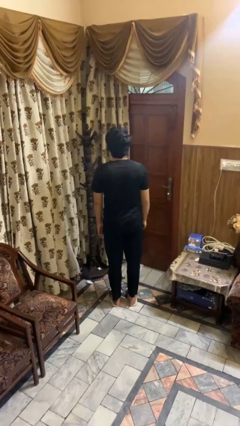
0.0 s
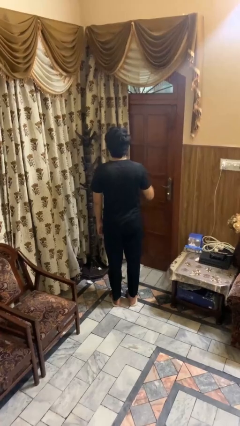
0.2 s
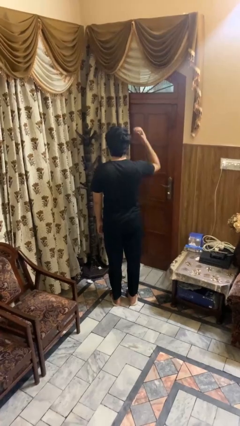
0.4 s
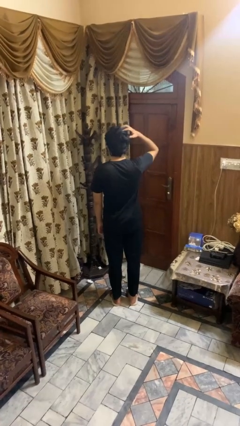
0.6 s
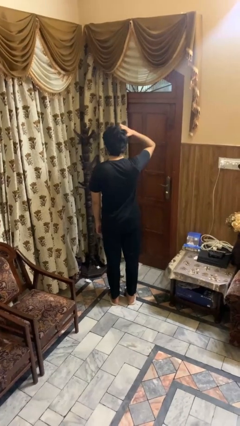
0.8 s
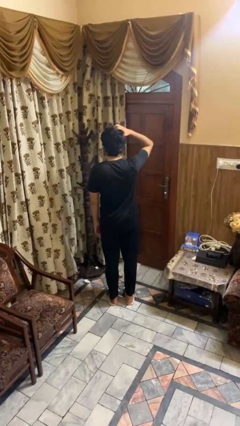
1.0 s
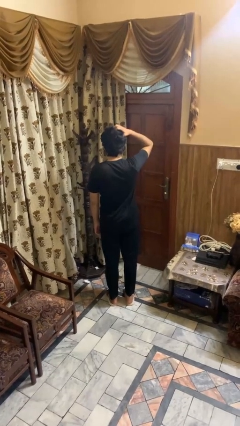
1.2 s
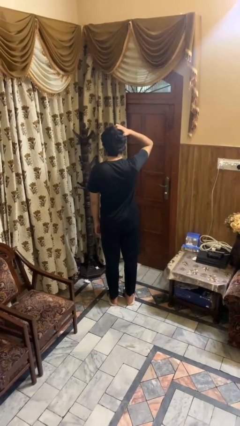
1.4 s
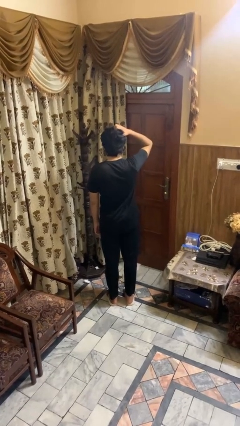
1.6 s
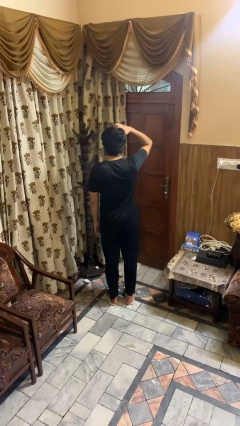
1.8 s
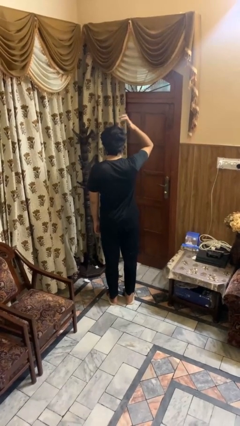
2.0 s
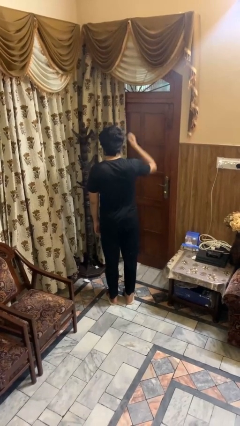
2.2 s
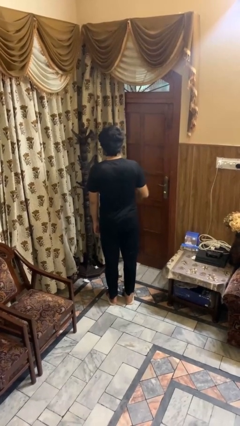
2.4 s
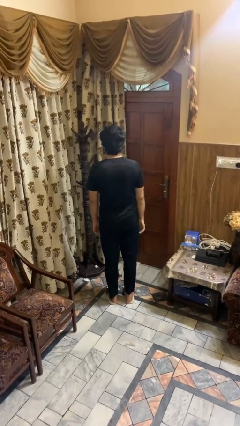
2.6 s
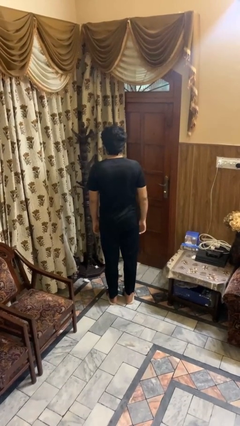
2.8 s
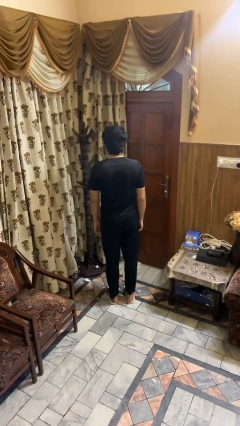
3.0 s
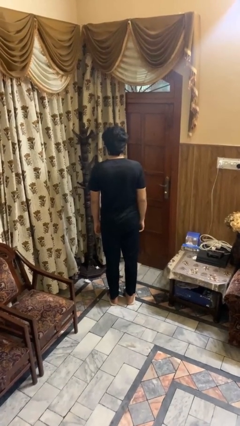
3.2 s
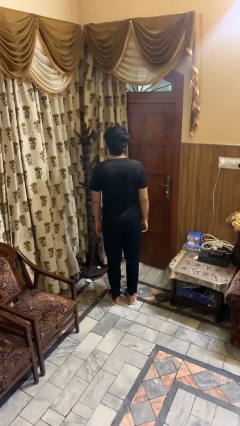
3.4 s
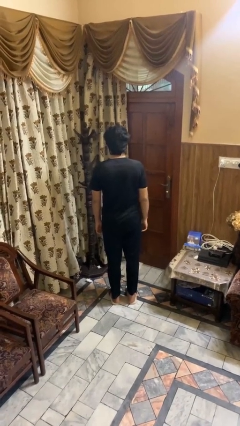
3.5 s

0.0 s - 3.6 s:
person scratches face

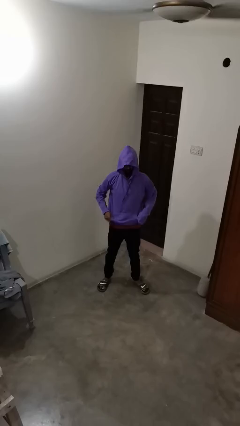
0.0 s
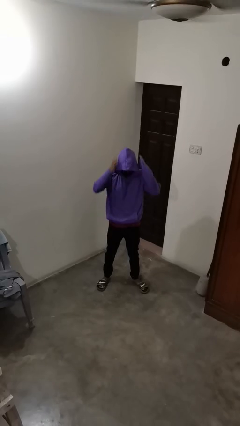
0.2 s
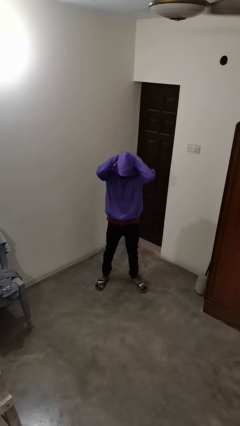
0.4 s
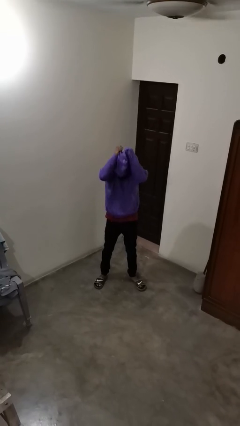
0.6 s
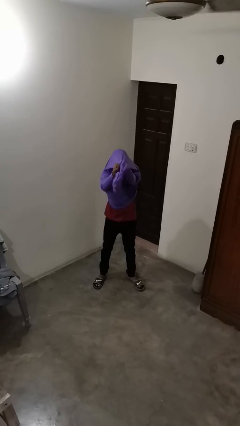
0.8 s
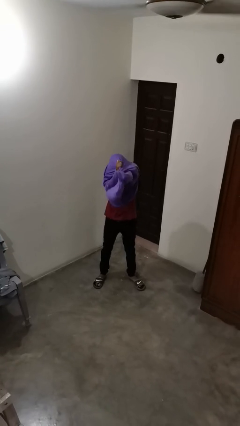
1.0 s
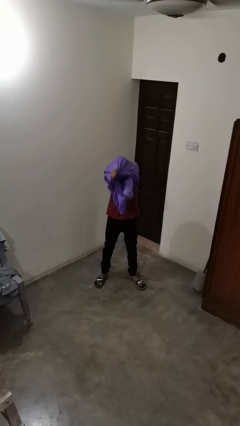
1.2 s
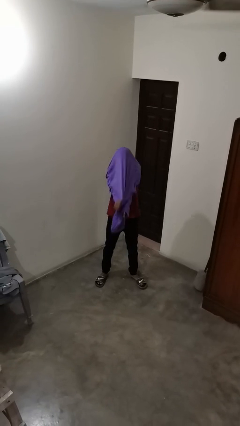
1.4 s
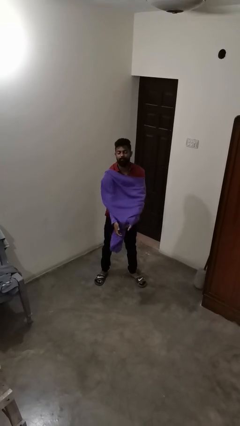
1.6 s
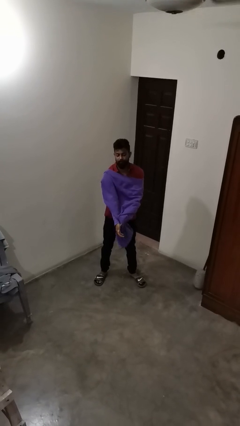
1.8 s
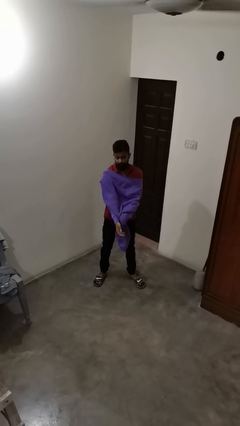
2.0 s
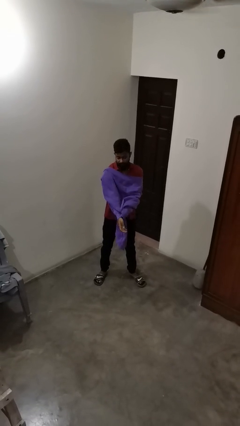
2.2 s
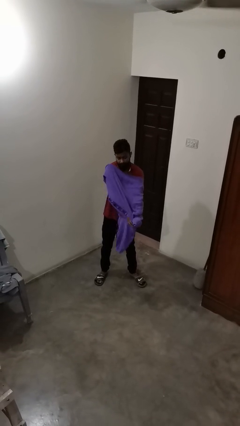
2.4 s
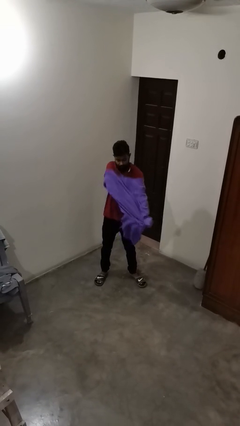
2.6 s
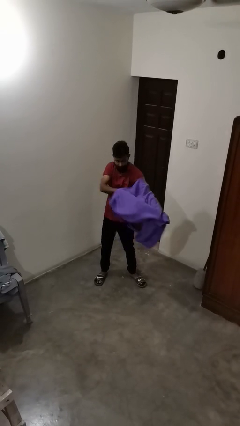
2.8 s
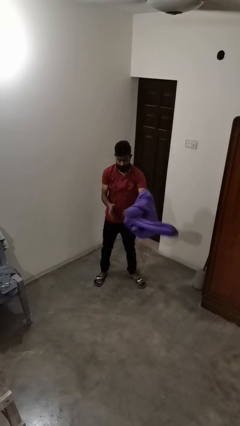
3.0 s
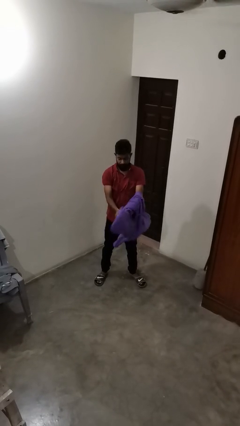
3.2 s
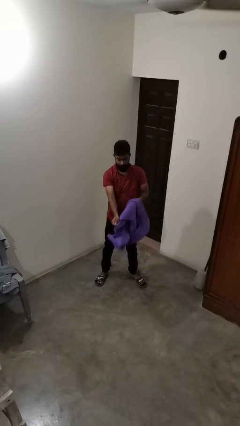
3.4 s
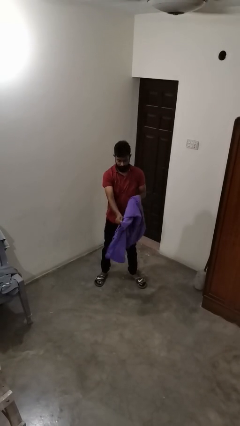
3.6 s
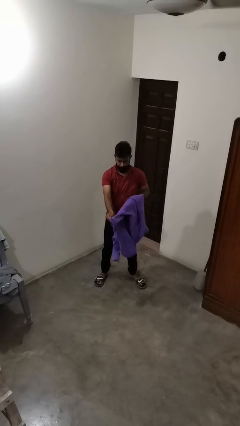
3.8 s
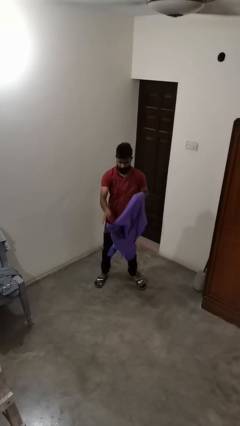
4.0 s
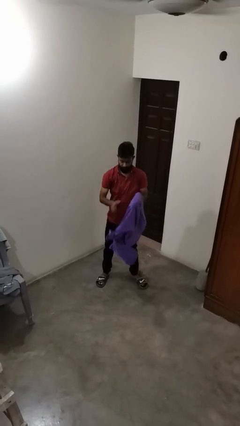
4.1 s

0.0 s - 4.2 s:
person takes off hoodie

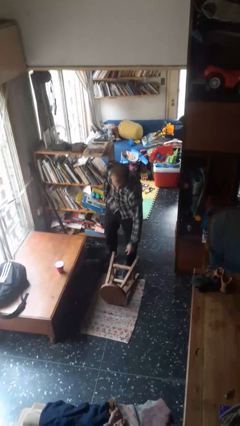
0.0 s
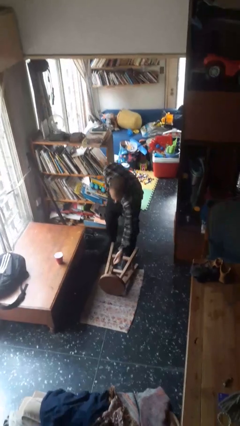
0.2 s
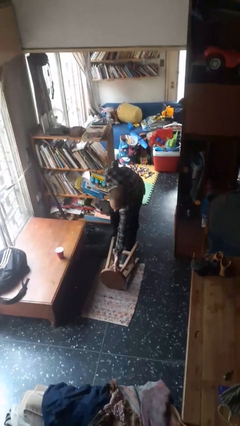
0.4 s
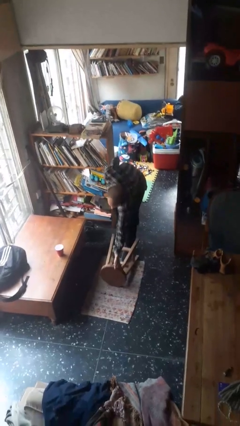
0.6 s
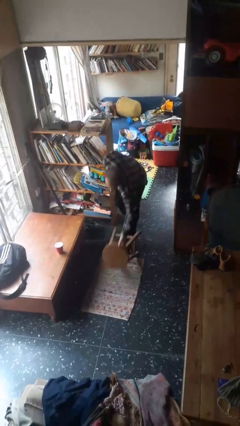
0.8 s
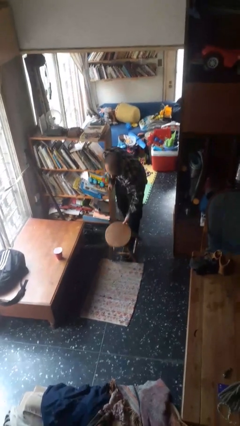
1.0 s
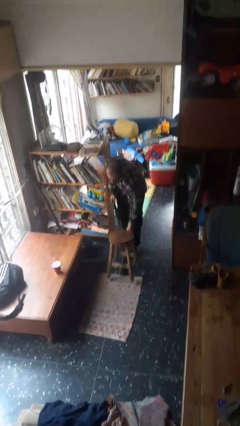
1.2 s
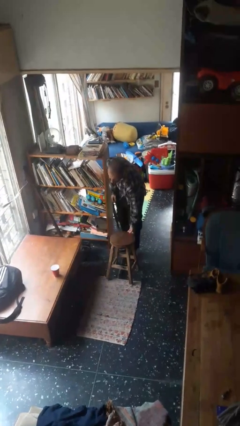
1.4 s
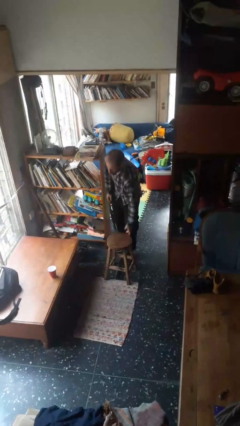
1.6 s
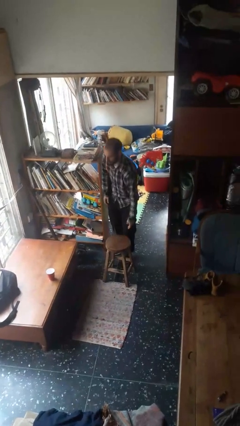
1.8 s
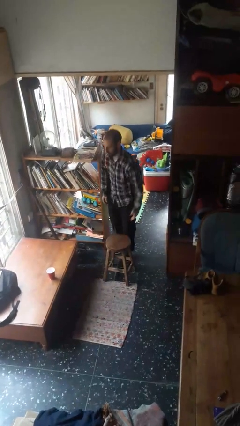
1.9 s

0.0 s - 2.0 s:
person sets upright furniture

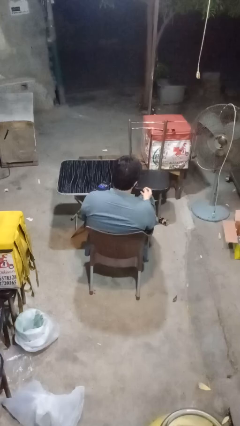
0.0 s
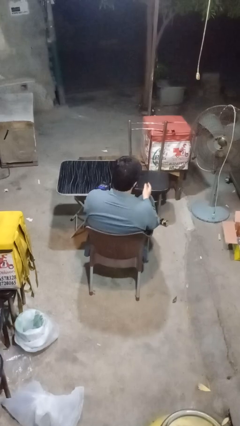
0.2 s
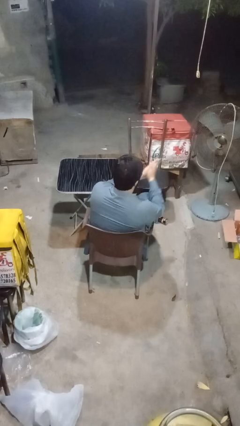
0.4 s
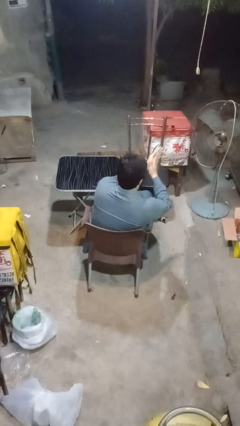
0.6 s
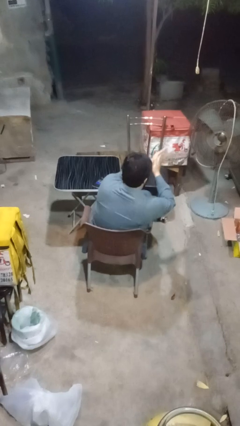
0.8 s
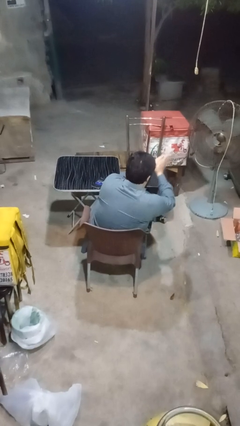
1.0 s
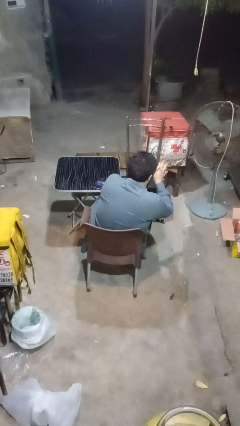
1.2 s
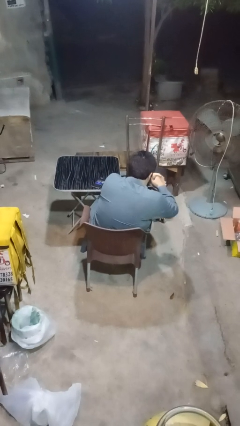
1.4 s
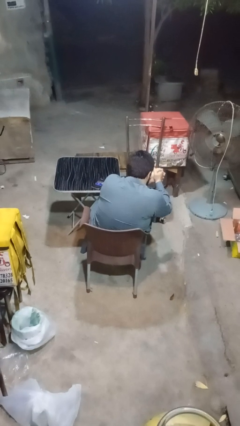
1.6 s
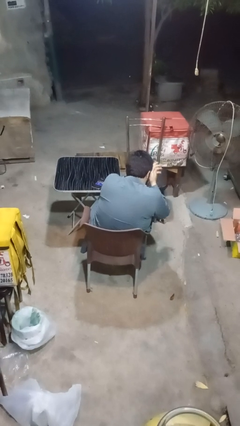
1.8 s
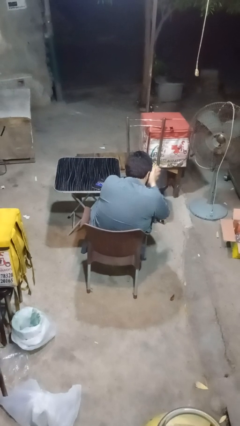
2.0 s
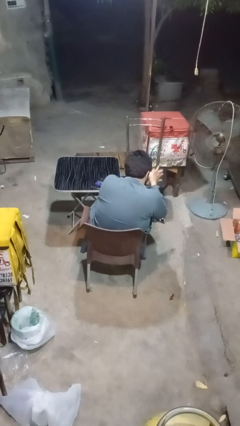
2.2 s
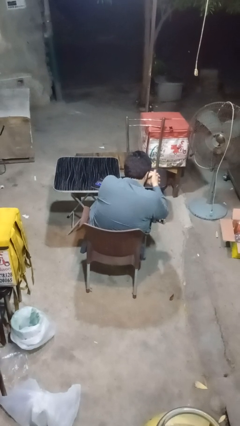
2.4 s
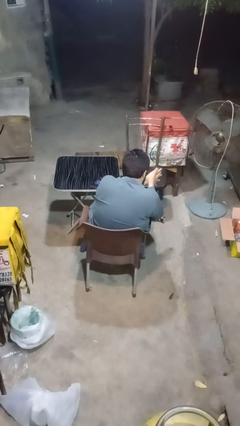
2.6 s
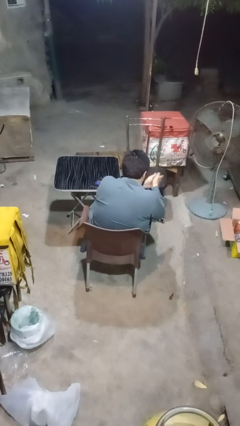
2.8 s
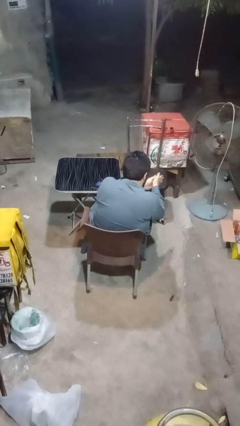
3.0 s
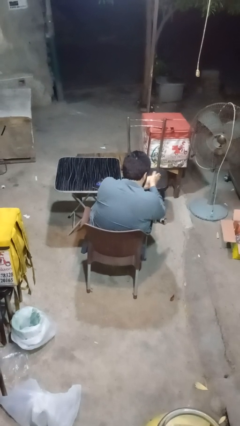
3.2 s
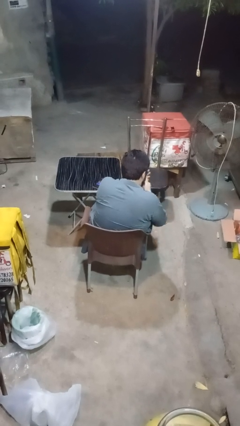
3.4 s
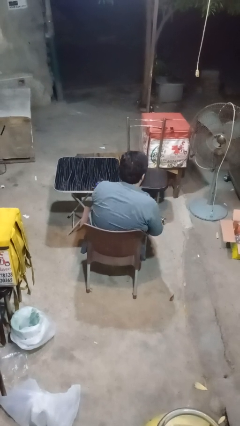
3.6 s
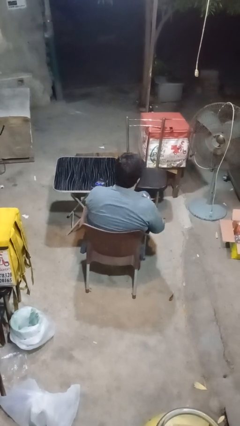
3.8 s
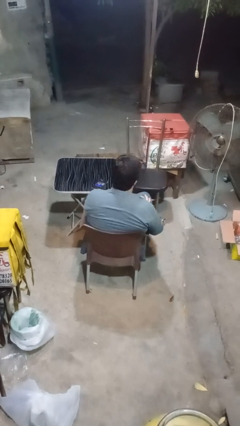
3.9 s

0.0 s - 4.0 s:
person blows into hands

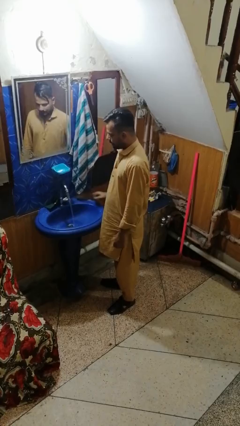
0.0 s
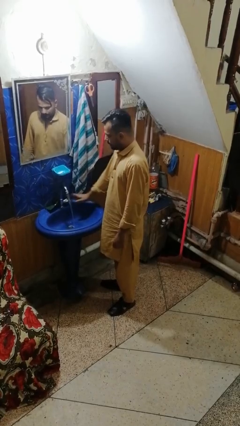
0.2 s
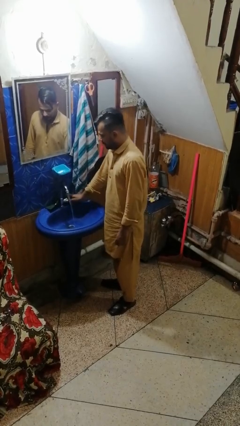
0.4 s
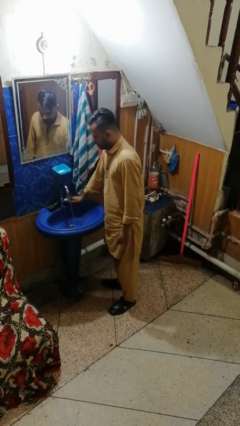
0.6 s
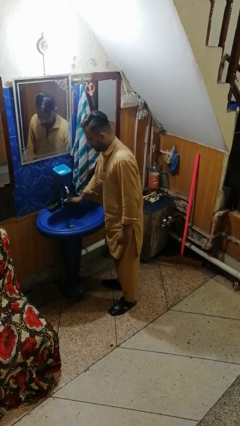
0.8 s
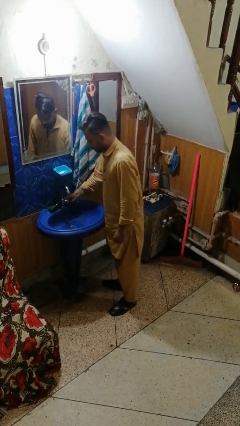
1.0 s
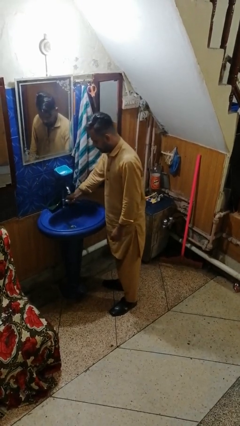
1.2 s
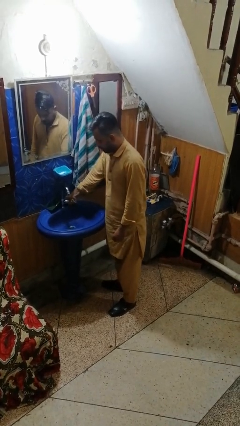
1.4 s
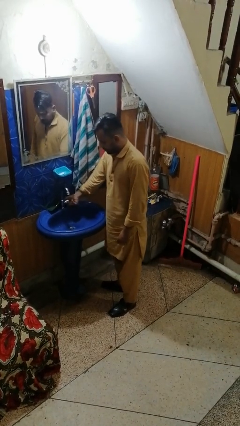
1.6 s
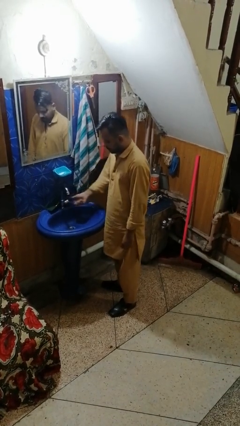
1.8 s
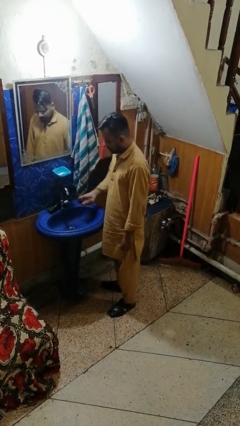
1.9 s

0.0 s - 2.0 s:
person turns off faucet

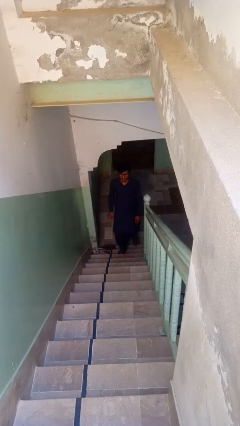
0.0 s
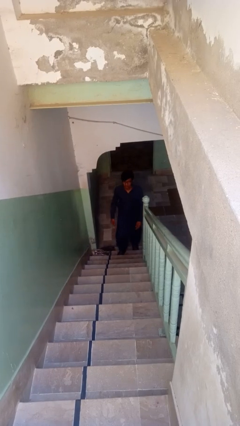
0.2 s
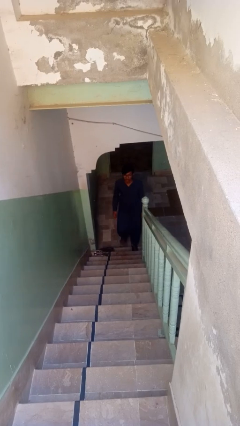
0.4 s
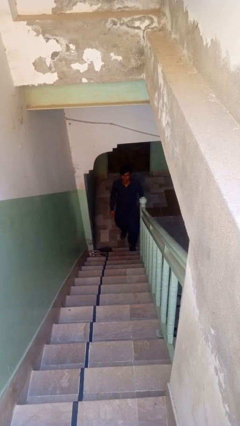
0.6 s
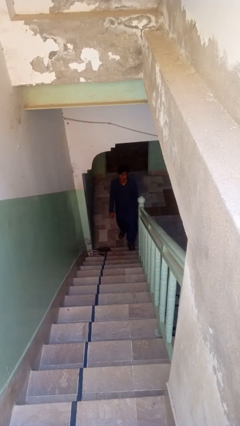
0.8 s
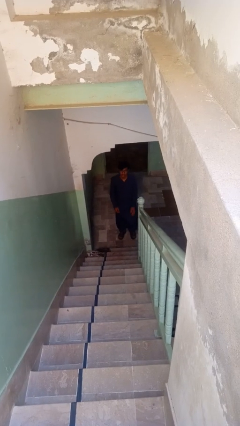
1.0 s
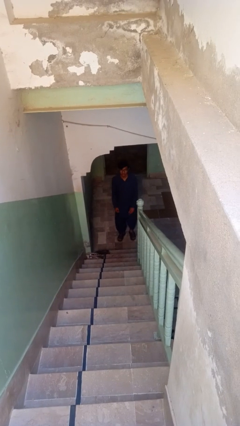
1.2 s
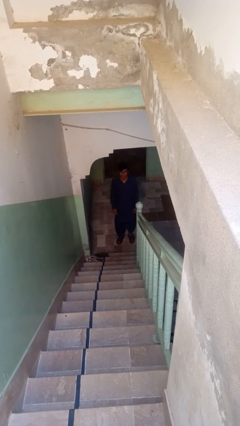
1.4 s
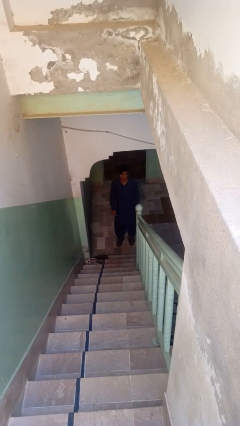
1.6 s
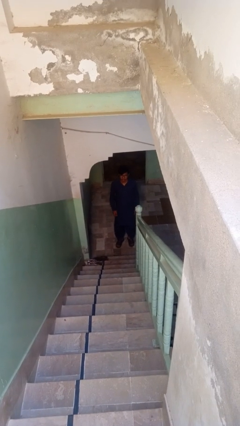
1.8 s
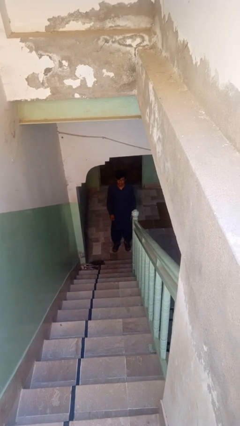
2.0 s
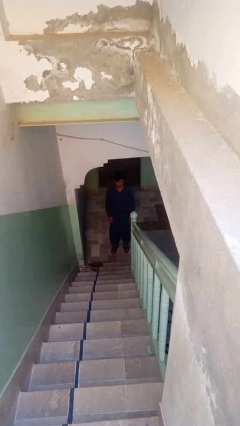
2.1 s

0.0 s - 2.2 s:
person climbs down stairs
